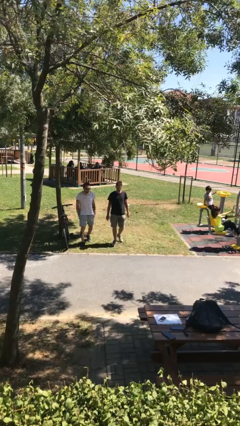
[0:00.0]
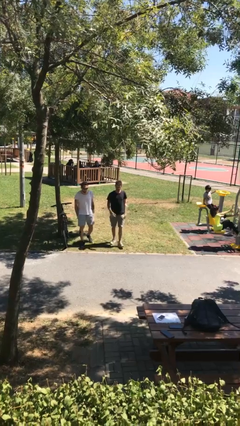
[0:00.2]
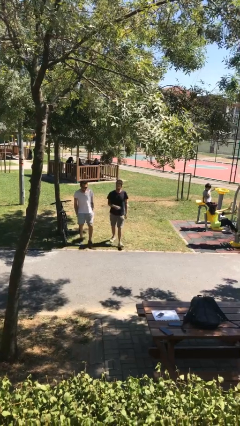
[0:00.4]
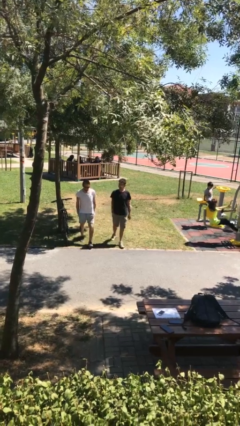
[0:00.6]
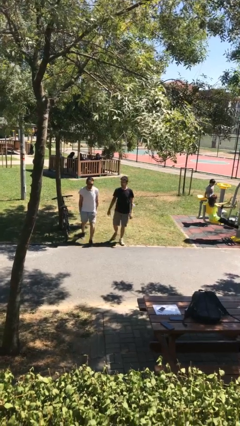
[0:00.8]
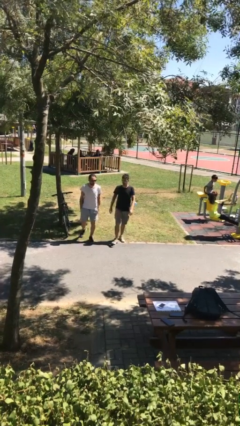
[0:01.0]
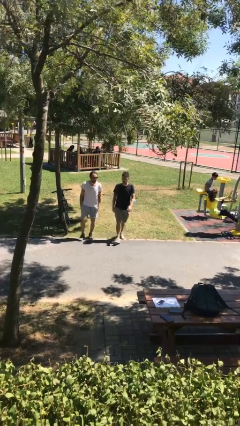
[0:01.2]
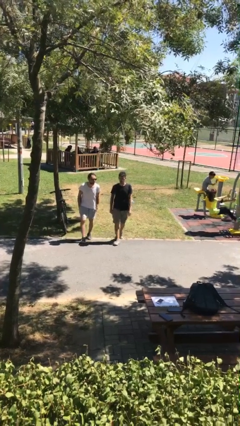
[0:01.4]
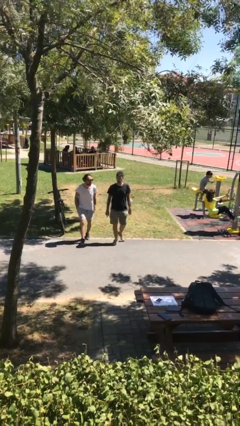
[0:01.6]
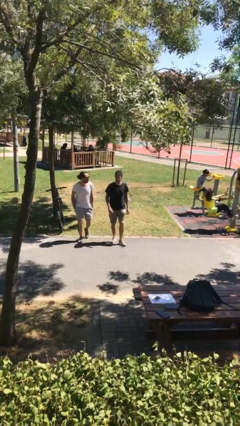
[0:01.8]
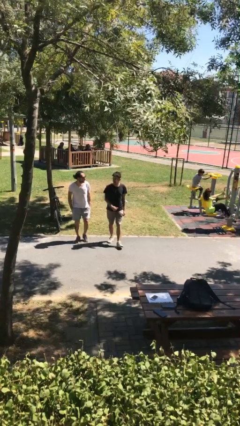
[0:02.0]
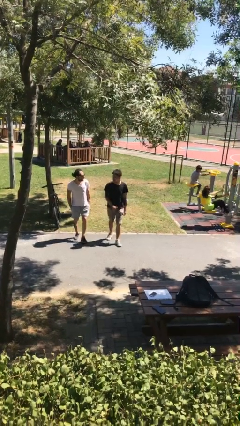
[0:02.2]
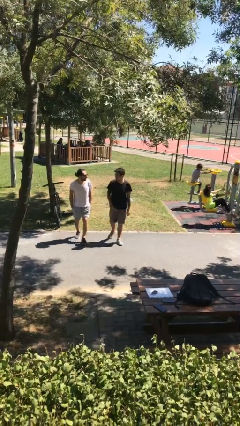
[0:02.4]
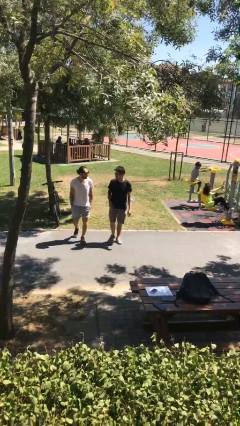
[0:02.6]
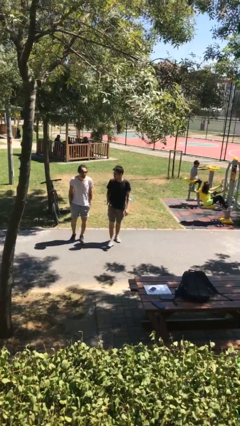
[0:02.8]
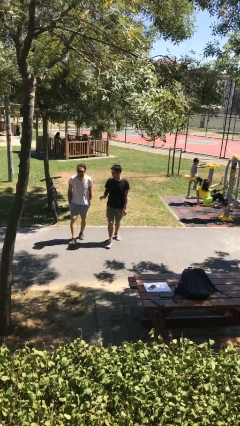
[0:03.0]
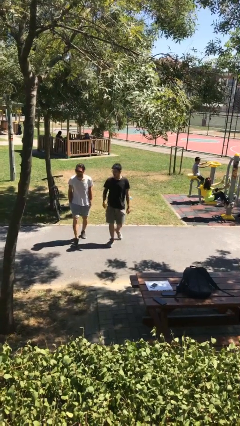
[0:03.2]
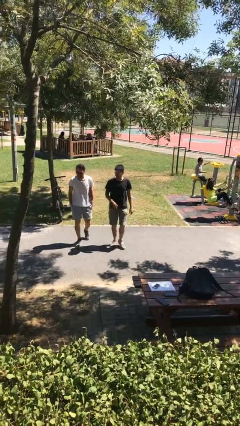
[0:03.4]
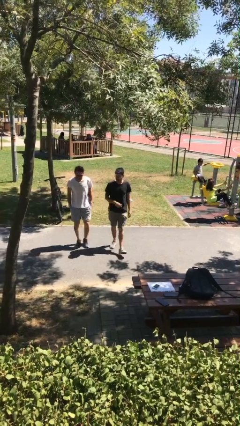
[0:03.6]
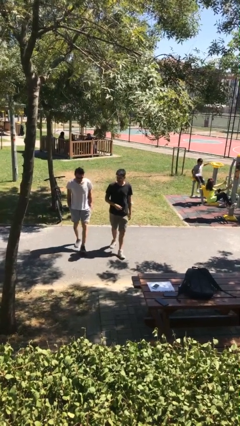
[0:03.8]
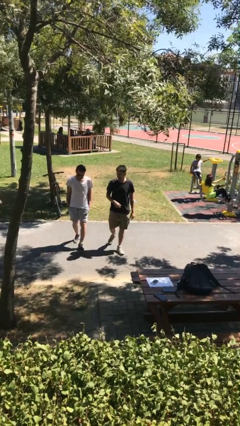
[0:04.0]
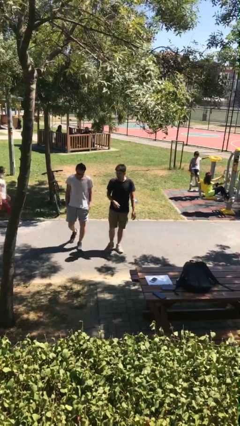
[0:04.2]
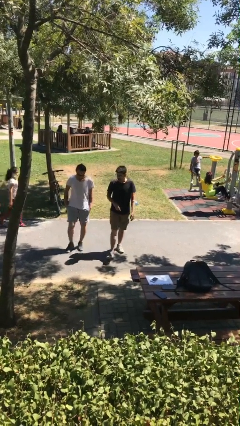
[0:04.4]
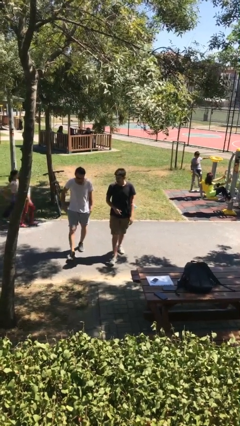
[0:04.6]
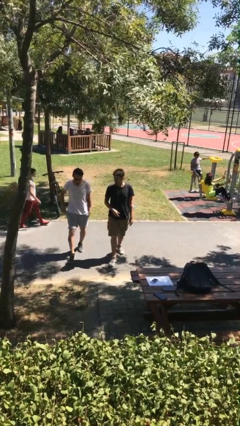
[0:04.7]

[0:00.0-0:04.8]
person talks to person

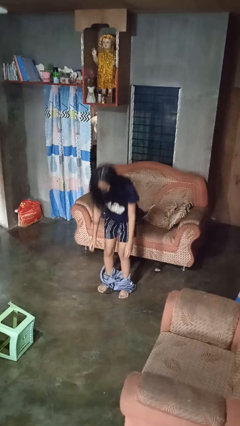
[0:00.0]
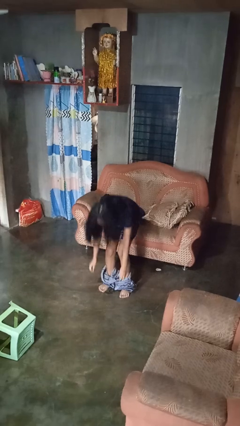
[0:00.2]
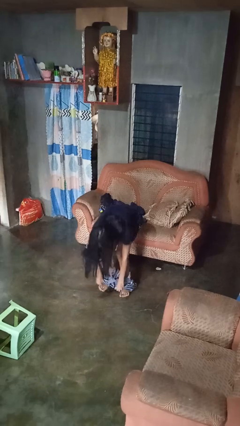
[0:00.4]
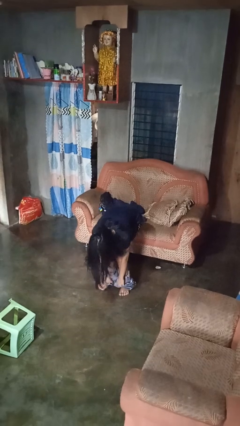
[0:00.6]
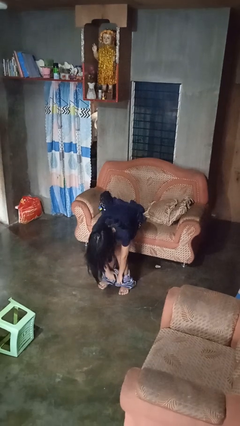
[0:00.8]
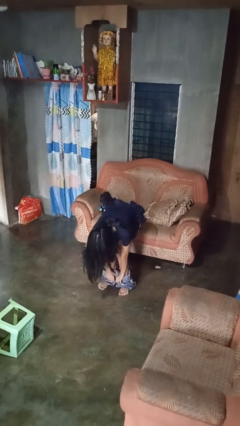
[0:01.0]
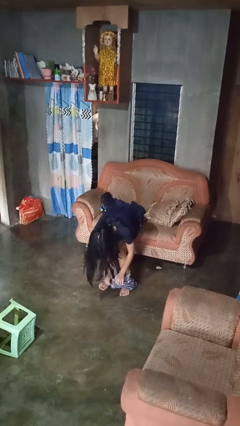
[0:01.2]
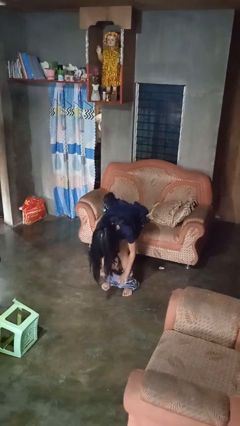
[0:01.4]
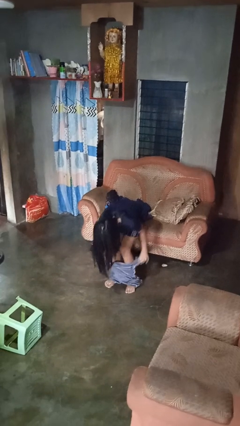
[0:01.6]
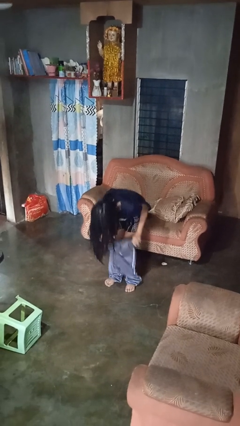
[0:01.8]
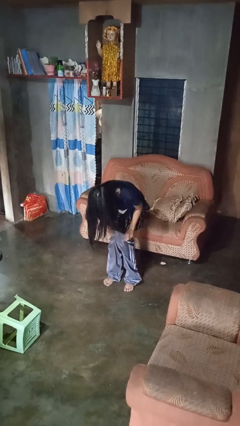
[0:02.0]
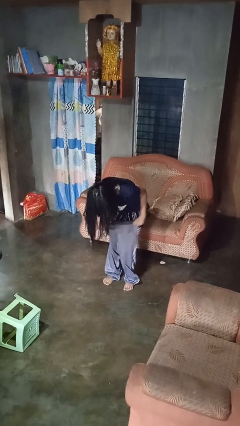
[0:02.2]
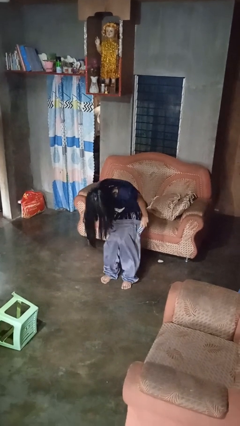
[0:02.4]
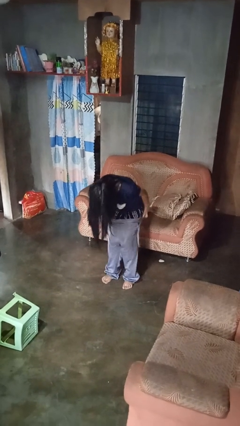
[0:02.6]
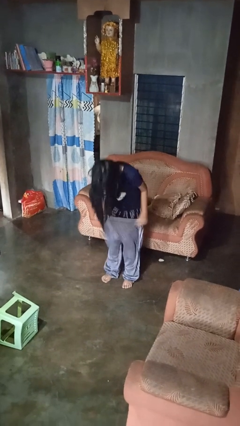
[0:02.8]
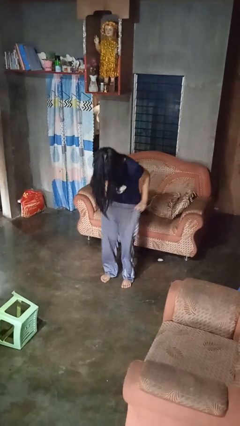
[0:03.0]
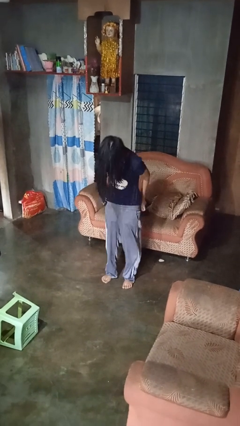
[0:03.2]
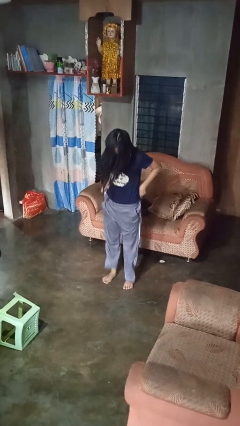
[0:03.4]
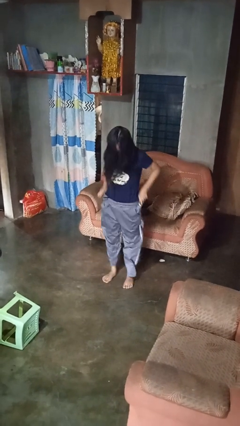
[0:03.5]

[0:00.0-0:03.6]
person puts on pants

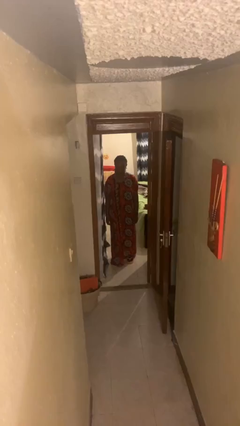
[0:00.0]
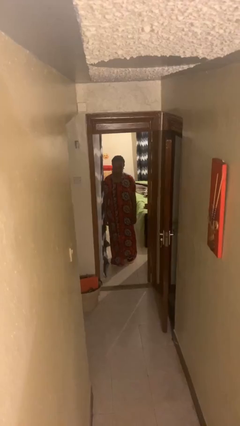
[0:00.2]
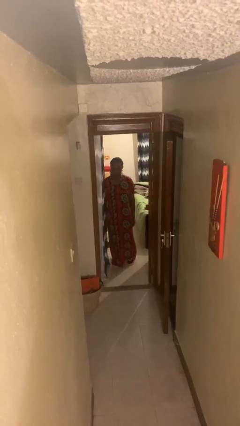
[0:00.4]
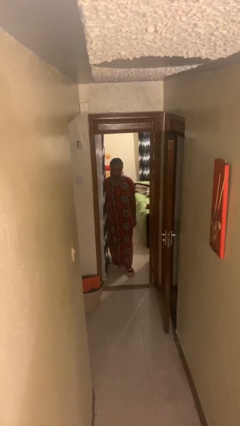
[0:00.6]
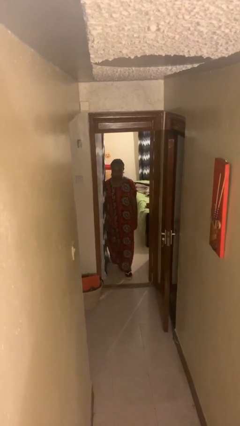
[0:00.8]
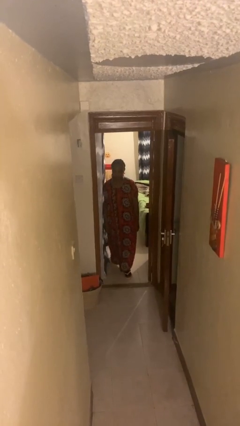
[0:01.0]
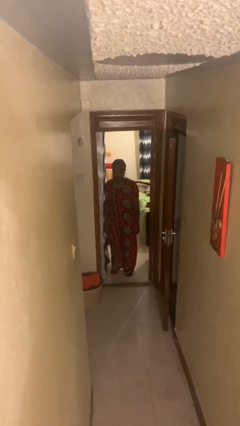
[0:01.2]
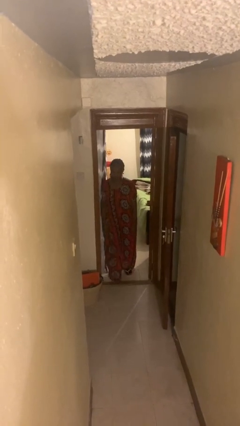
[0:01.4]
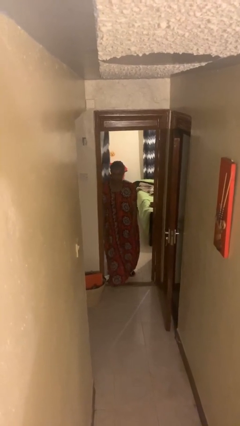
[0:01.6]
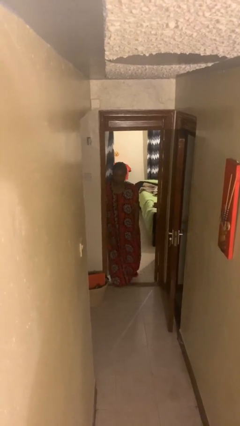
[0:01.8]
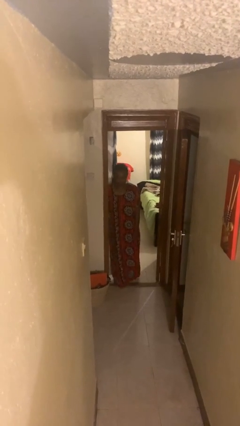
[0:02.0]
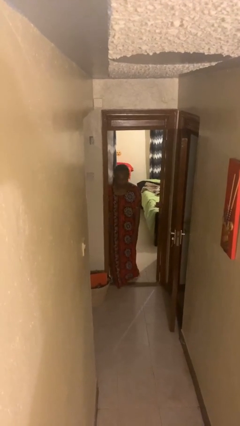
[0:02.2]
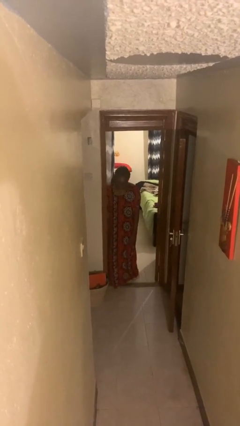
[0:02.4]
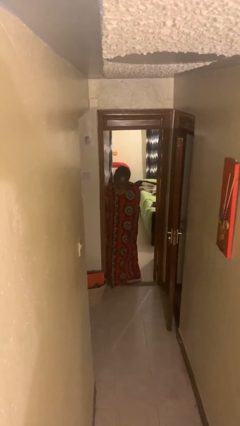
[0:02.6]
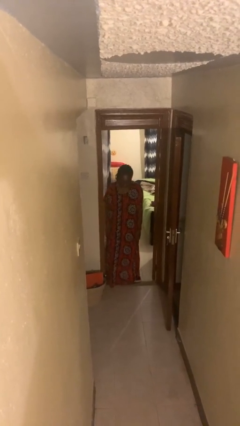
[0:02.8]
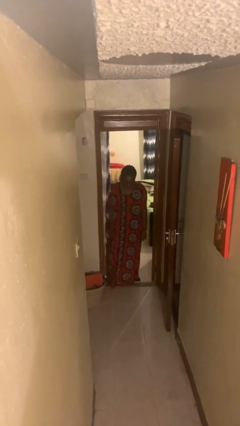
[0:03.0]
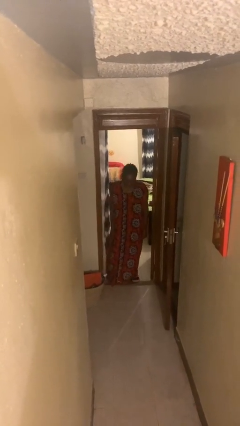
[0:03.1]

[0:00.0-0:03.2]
person bumps into wall

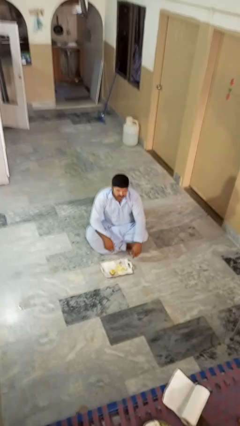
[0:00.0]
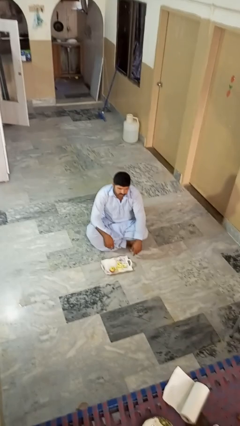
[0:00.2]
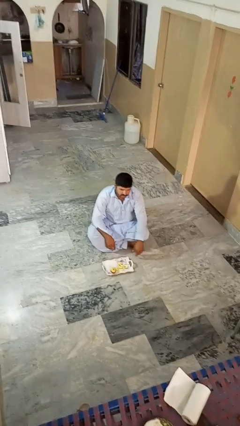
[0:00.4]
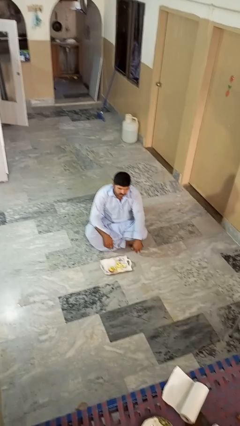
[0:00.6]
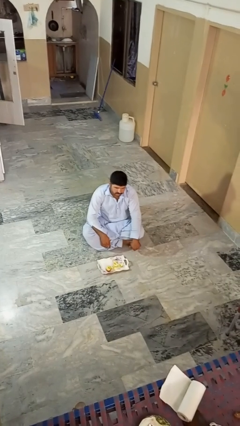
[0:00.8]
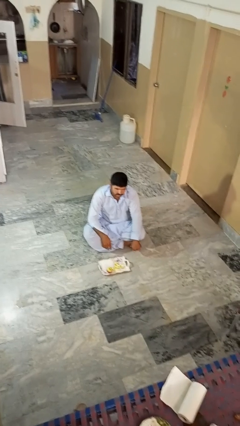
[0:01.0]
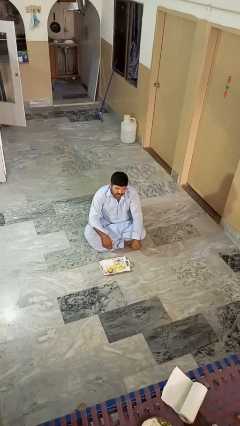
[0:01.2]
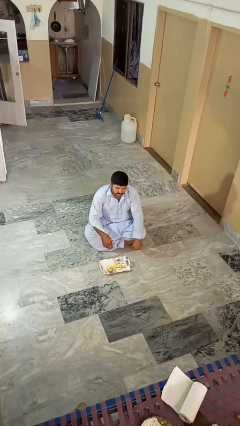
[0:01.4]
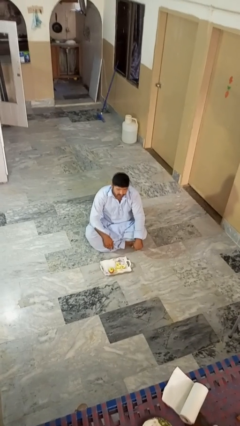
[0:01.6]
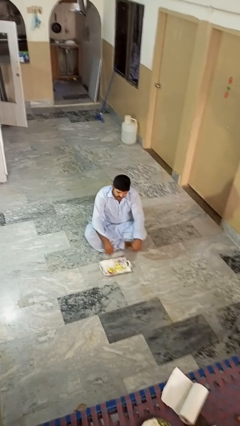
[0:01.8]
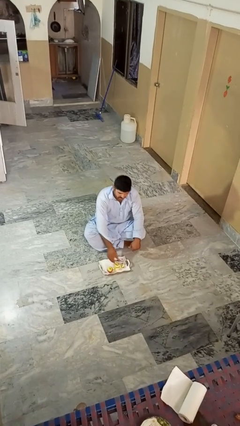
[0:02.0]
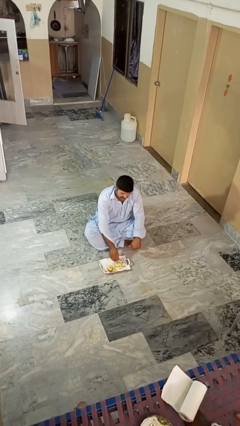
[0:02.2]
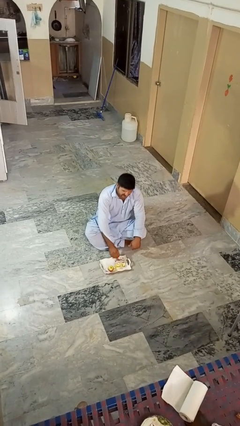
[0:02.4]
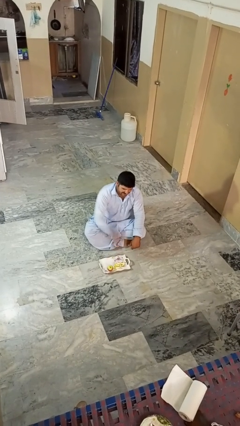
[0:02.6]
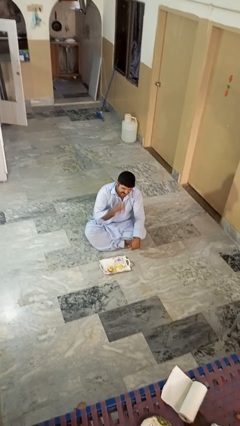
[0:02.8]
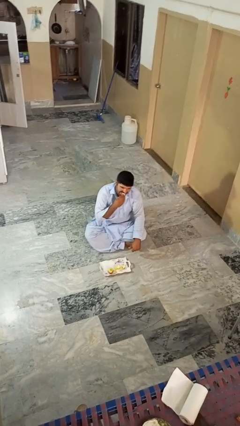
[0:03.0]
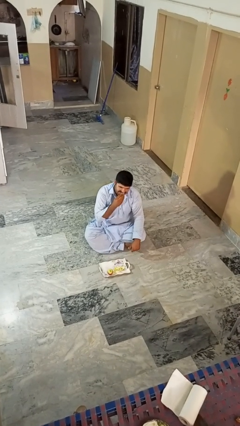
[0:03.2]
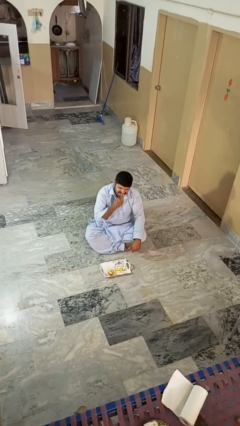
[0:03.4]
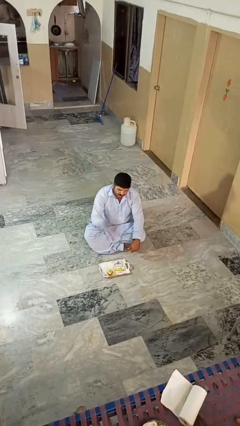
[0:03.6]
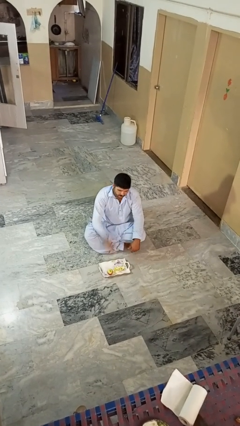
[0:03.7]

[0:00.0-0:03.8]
person eats apple

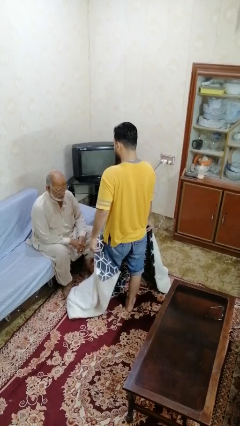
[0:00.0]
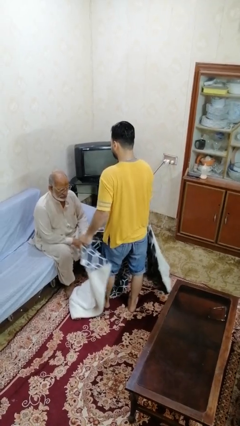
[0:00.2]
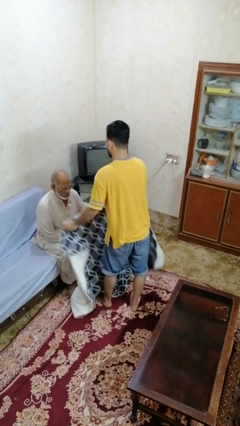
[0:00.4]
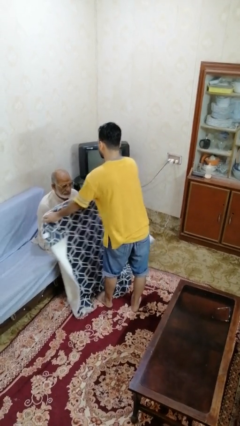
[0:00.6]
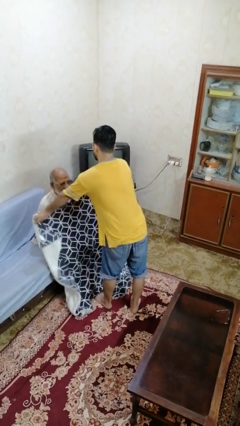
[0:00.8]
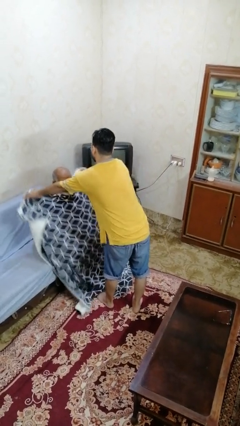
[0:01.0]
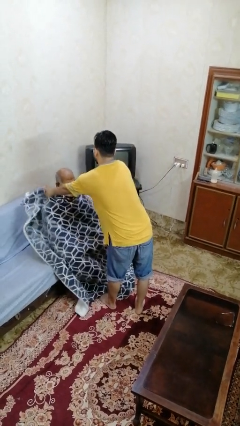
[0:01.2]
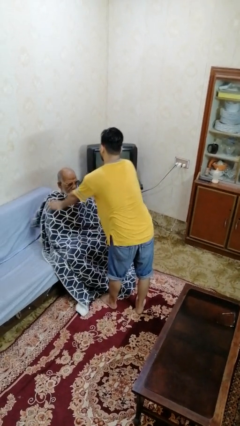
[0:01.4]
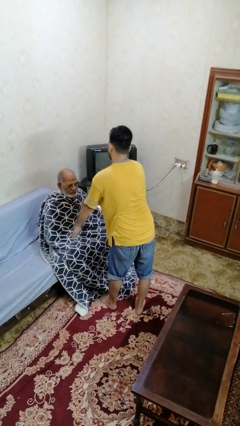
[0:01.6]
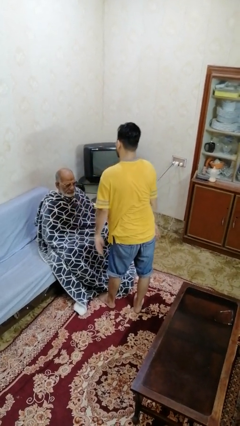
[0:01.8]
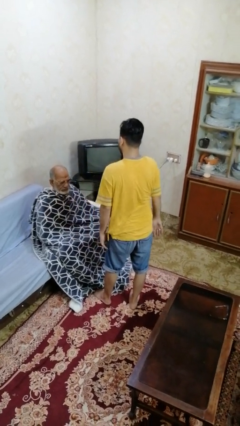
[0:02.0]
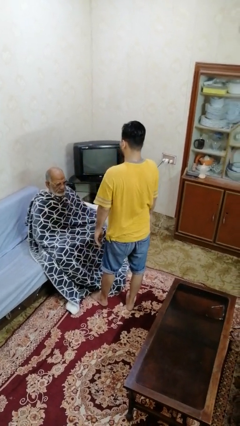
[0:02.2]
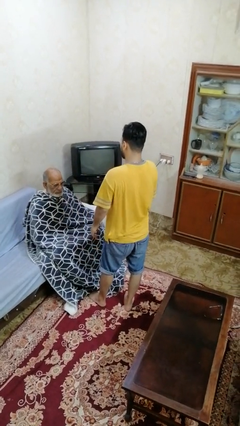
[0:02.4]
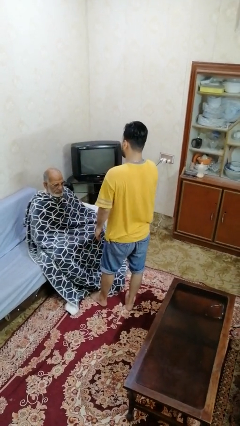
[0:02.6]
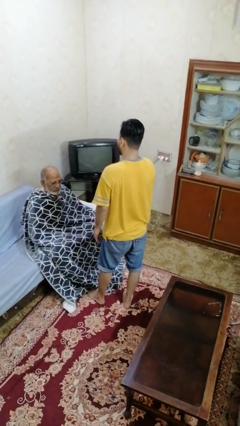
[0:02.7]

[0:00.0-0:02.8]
person covers friend with blanket
